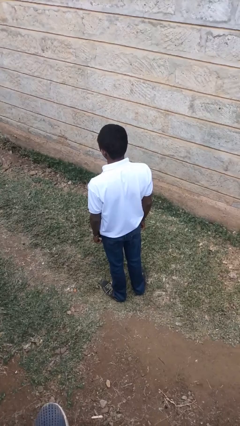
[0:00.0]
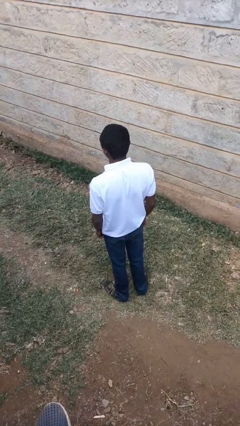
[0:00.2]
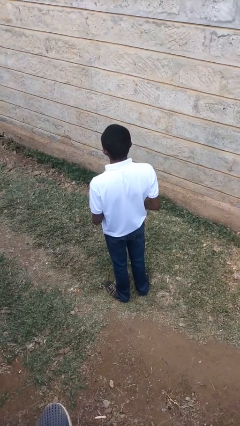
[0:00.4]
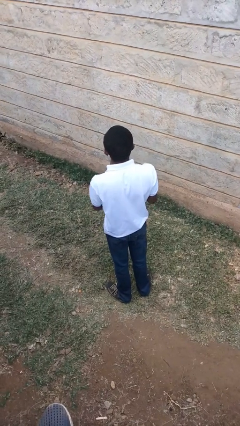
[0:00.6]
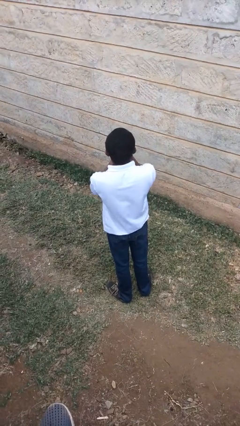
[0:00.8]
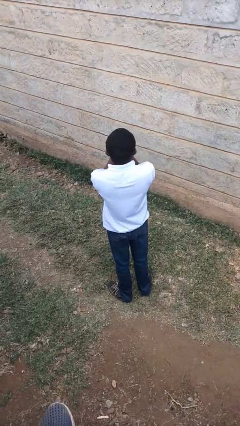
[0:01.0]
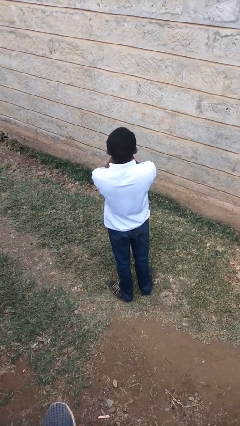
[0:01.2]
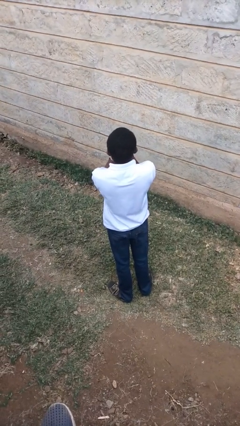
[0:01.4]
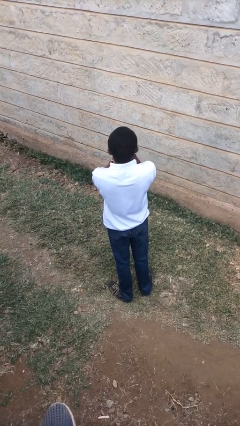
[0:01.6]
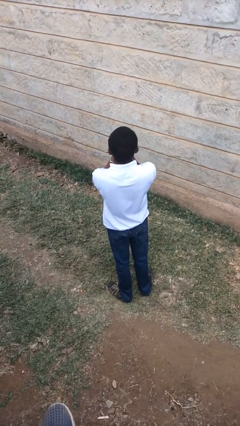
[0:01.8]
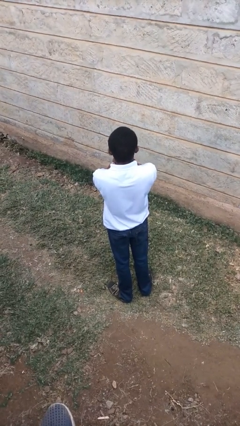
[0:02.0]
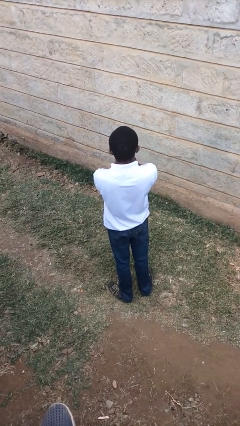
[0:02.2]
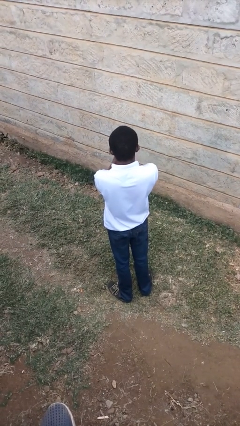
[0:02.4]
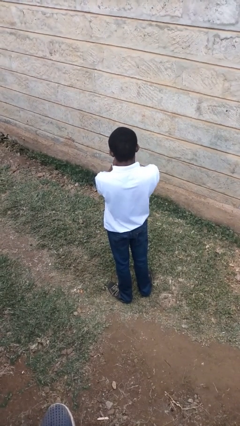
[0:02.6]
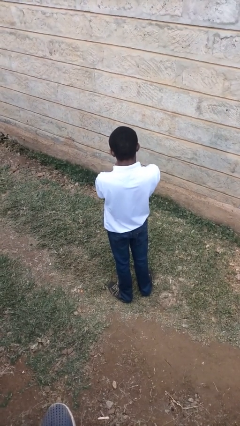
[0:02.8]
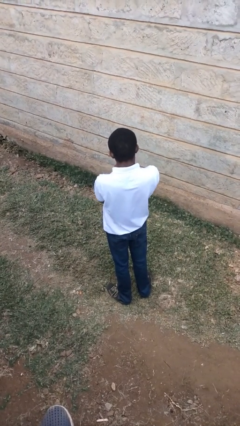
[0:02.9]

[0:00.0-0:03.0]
person blows into hands

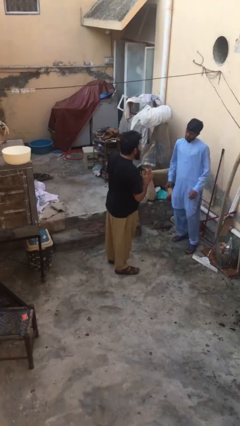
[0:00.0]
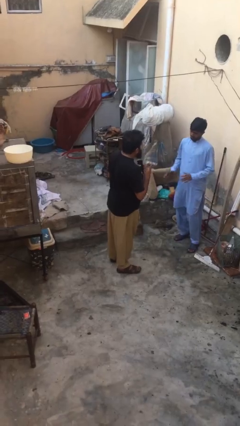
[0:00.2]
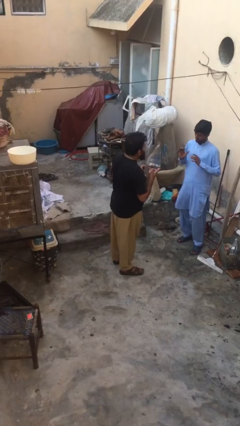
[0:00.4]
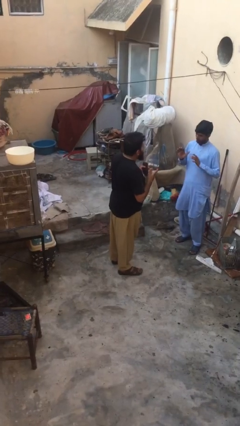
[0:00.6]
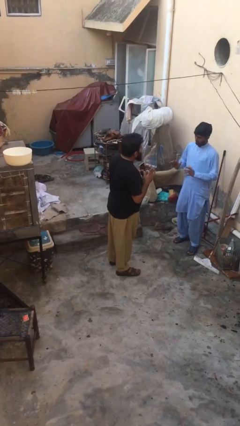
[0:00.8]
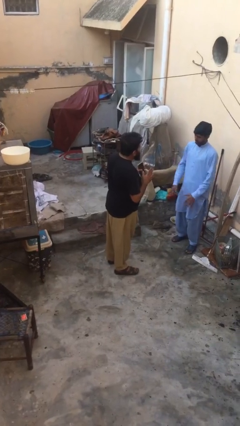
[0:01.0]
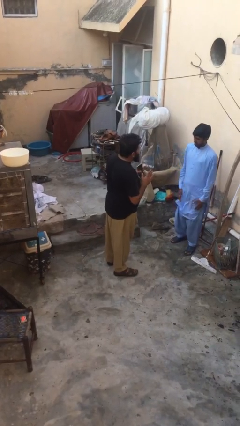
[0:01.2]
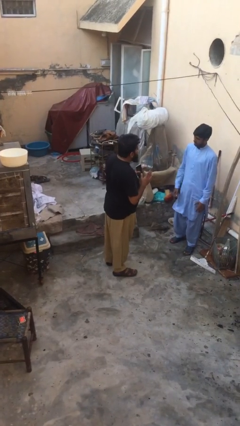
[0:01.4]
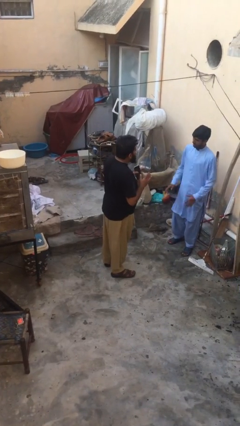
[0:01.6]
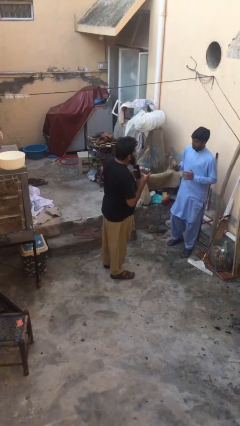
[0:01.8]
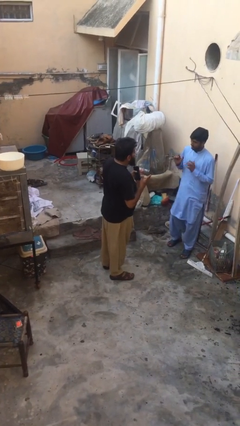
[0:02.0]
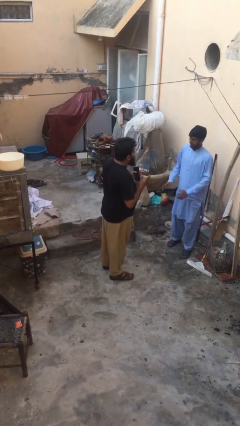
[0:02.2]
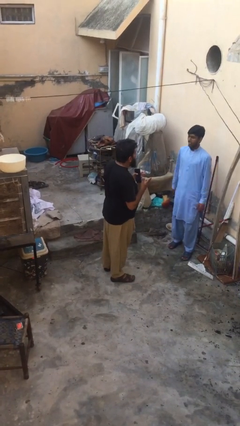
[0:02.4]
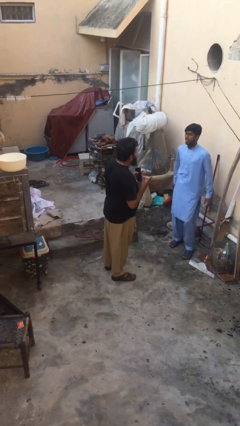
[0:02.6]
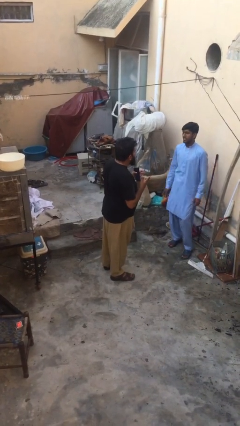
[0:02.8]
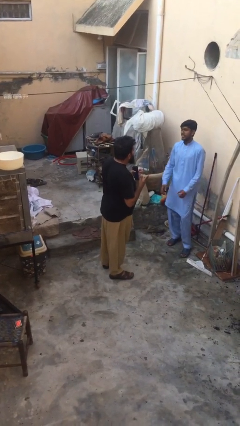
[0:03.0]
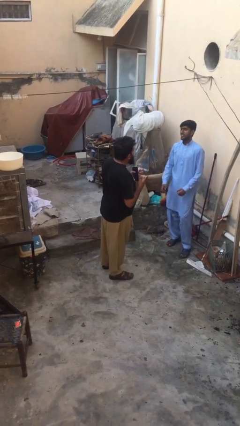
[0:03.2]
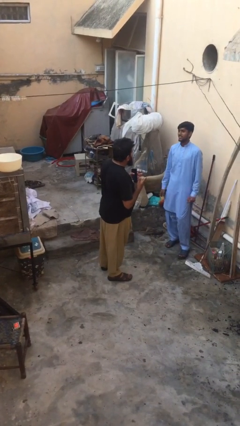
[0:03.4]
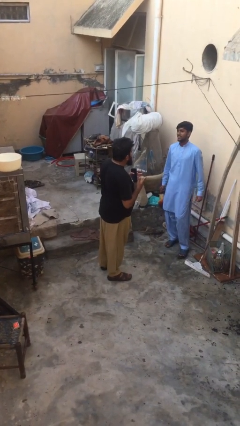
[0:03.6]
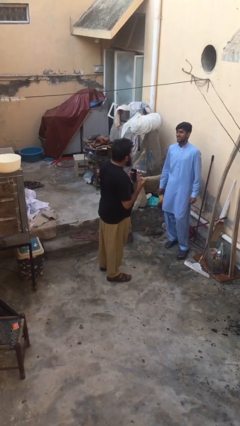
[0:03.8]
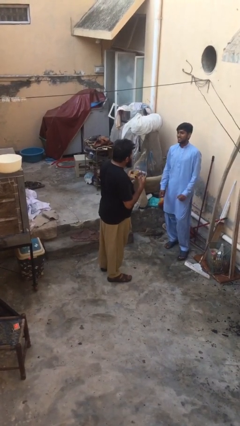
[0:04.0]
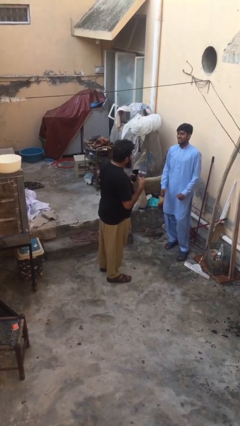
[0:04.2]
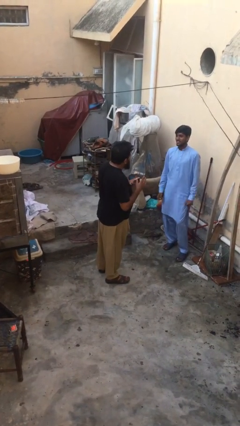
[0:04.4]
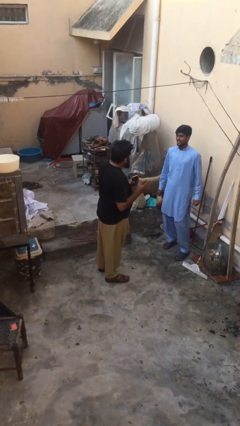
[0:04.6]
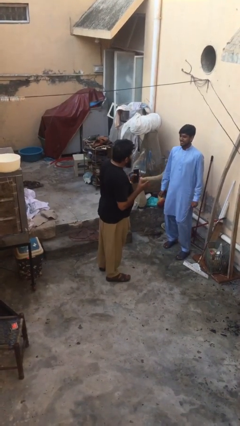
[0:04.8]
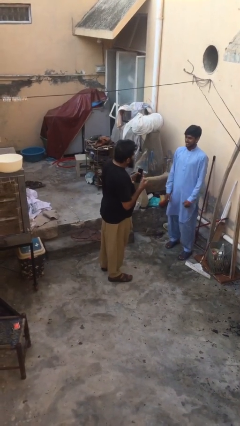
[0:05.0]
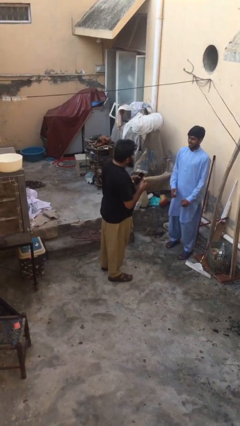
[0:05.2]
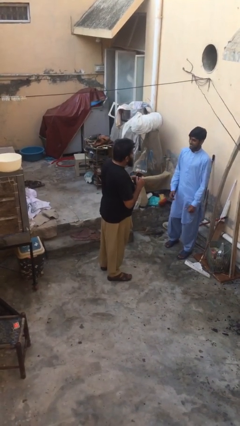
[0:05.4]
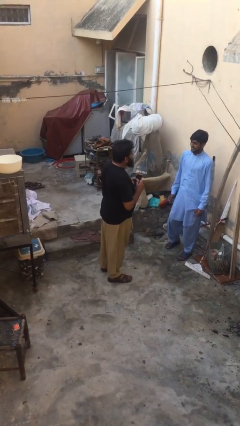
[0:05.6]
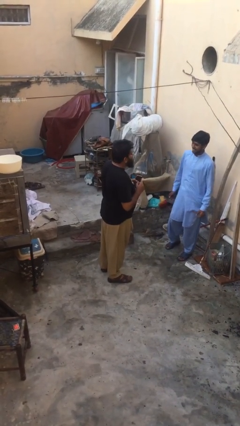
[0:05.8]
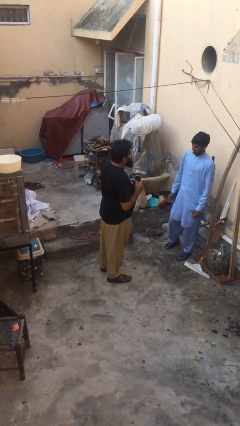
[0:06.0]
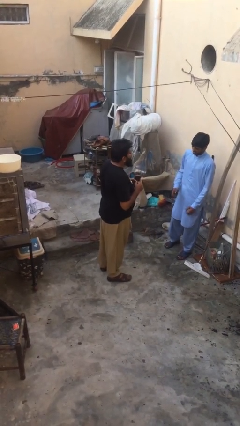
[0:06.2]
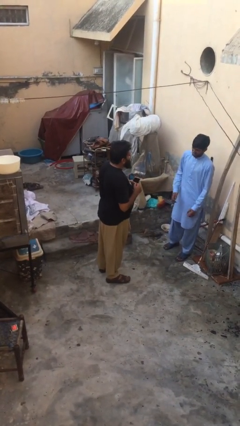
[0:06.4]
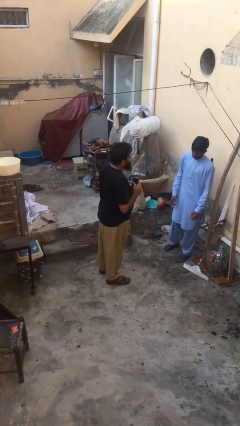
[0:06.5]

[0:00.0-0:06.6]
person talks to person

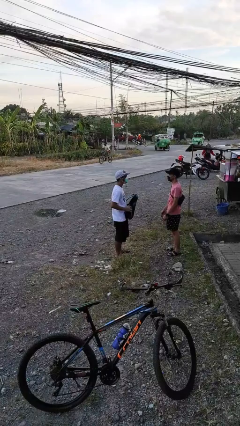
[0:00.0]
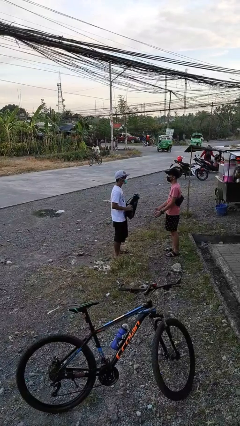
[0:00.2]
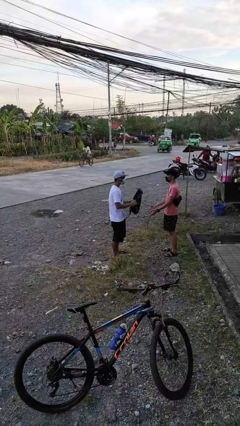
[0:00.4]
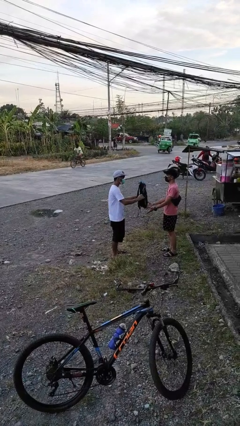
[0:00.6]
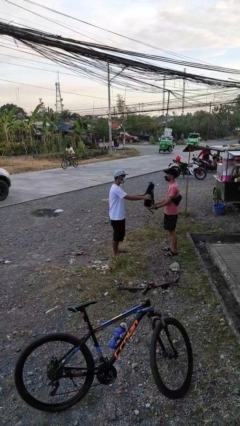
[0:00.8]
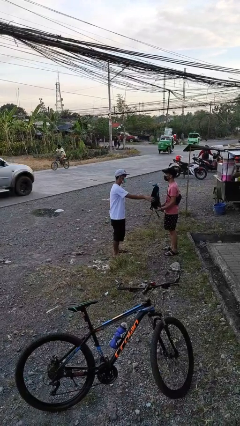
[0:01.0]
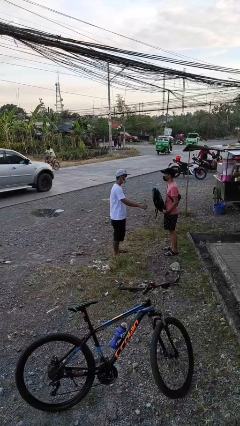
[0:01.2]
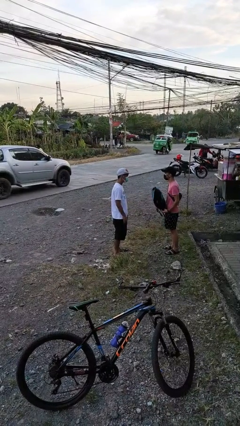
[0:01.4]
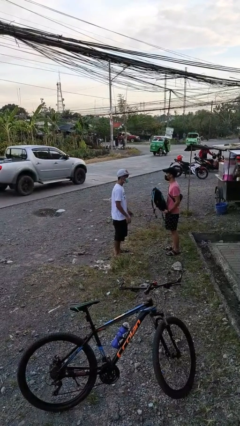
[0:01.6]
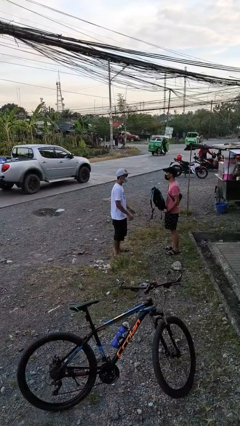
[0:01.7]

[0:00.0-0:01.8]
person transfers object to person

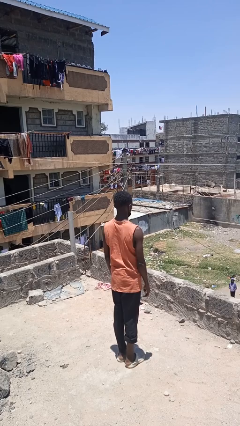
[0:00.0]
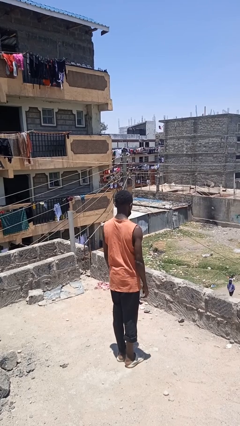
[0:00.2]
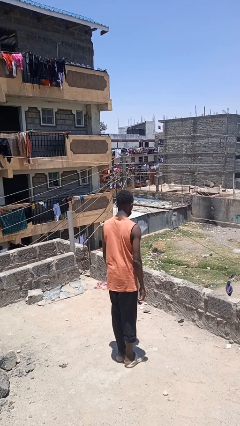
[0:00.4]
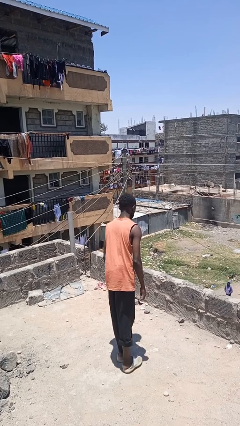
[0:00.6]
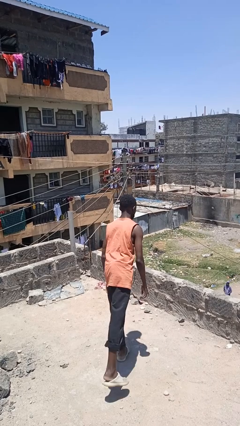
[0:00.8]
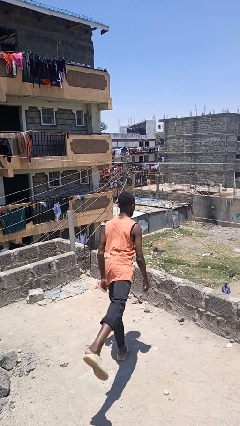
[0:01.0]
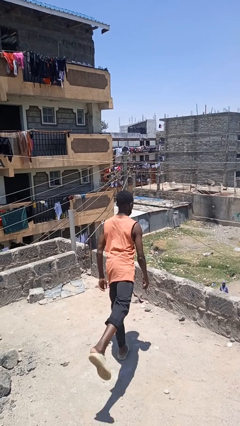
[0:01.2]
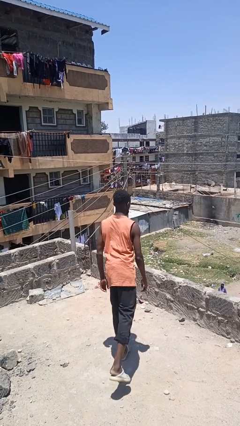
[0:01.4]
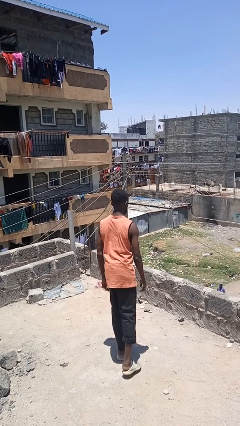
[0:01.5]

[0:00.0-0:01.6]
person wiggles hips

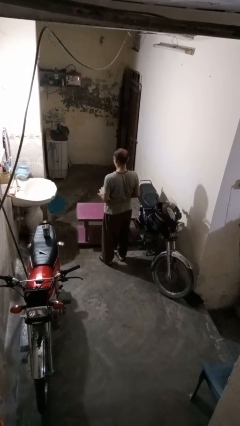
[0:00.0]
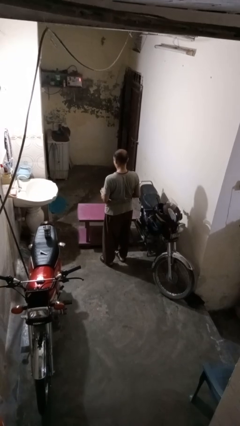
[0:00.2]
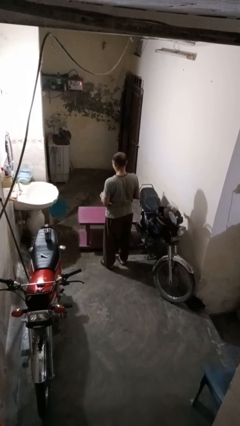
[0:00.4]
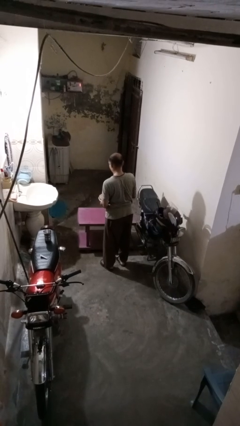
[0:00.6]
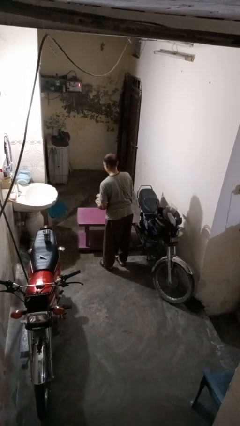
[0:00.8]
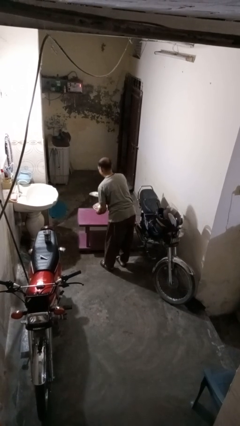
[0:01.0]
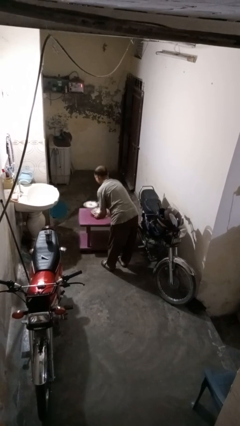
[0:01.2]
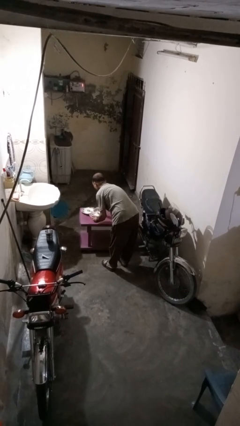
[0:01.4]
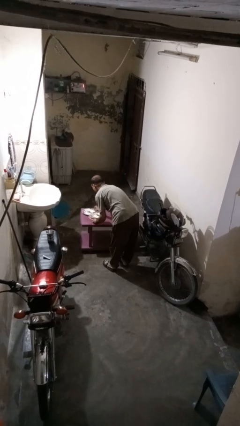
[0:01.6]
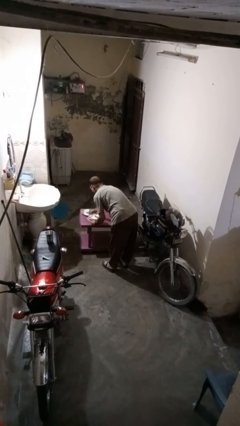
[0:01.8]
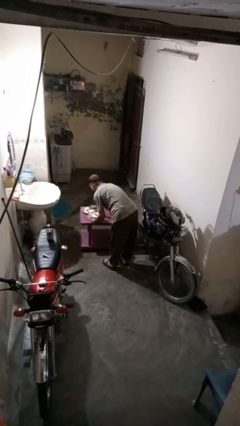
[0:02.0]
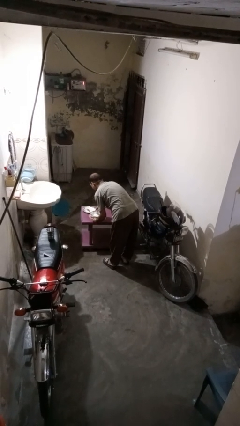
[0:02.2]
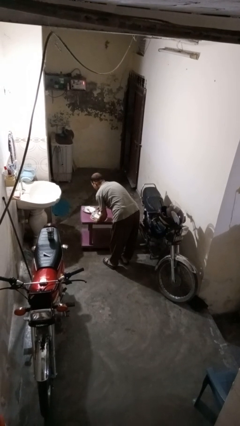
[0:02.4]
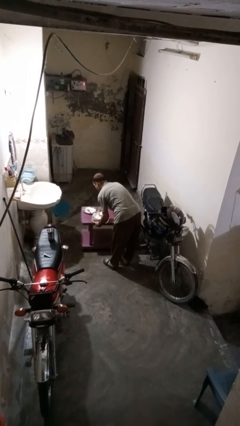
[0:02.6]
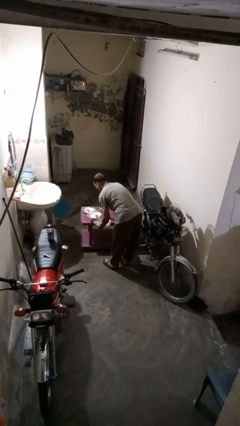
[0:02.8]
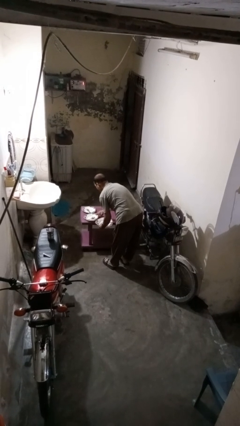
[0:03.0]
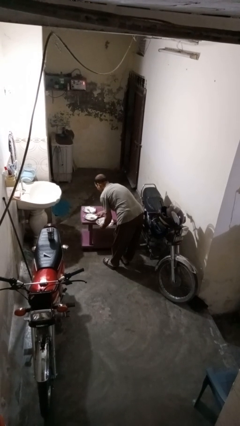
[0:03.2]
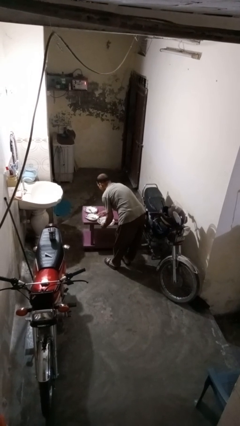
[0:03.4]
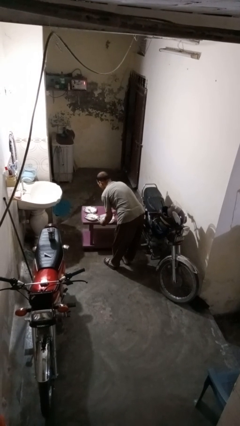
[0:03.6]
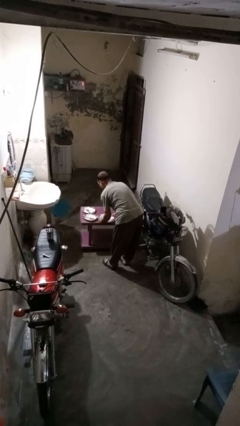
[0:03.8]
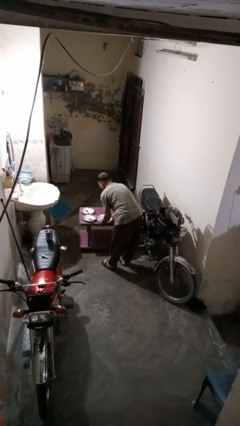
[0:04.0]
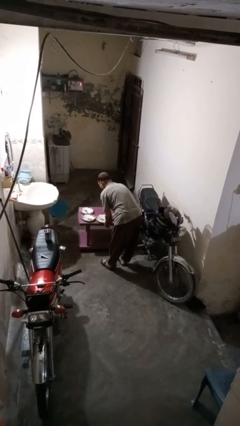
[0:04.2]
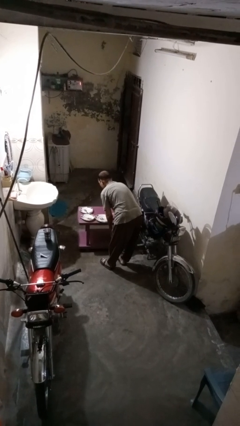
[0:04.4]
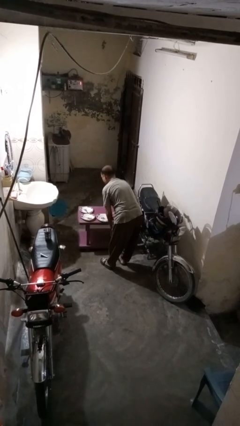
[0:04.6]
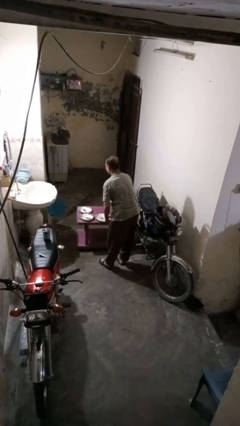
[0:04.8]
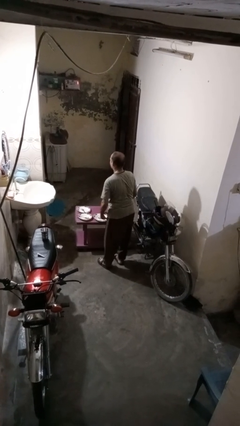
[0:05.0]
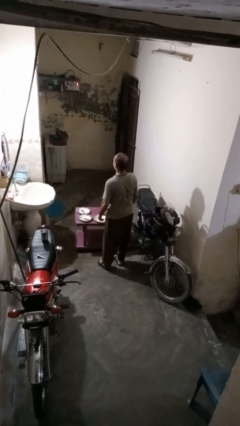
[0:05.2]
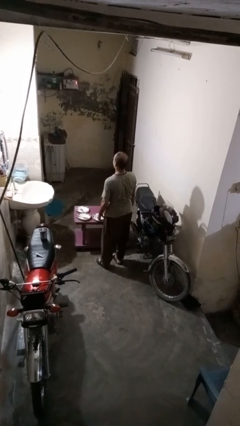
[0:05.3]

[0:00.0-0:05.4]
person sets table
